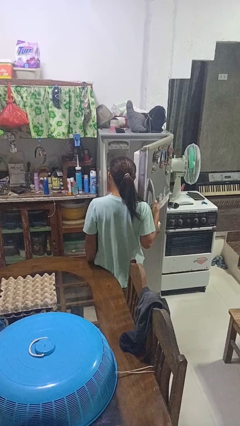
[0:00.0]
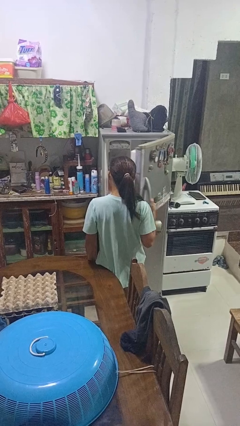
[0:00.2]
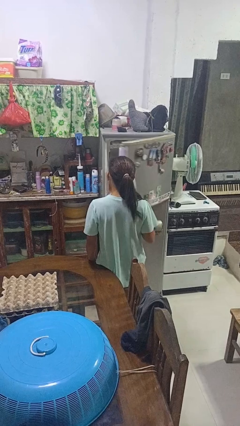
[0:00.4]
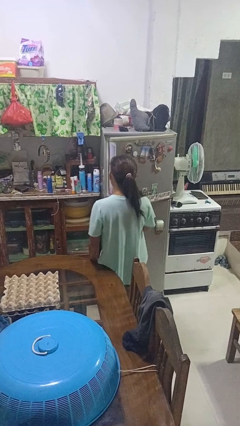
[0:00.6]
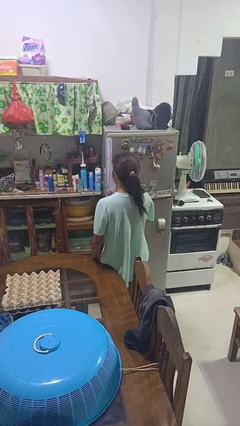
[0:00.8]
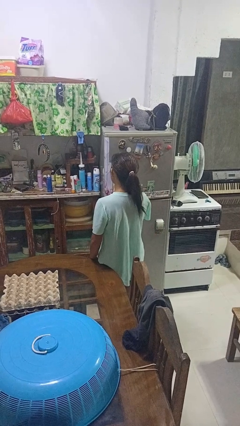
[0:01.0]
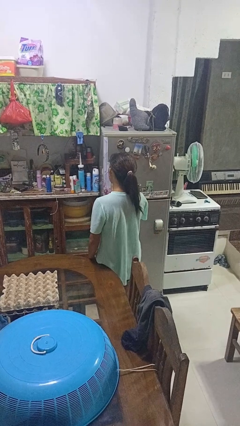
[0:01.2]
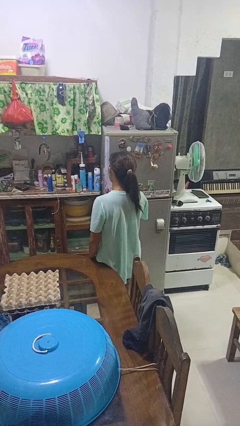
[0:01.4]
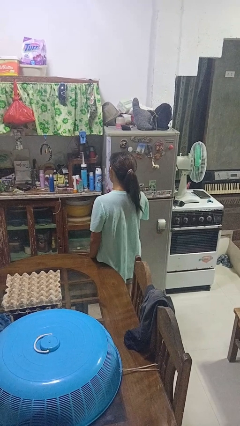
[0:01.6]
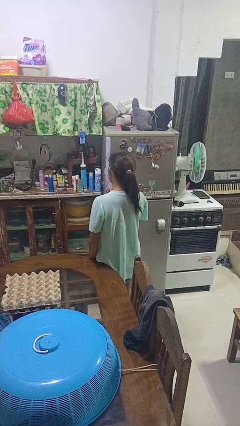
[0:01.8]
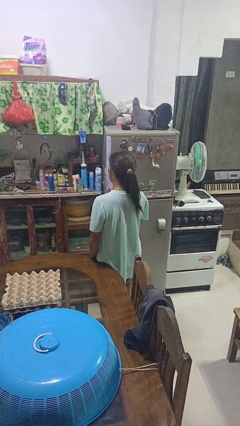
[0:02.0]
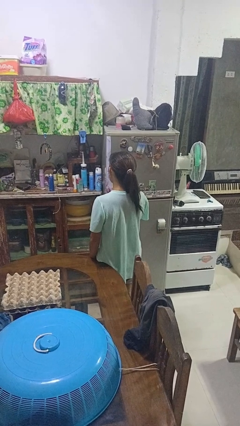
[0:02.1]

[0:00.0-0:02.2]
person closes refrigerator

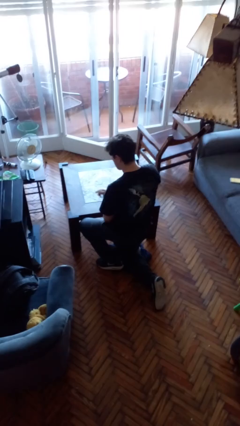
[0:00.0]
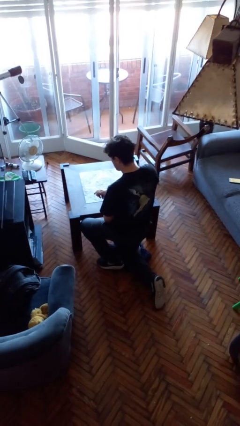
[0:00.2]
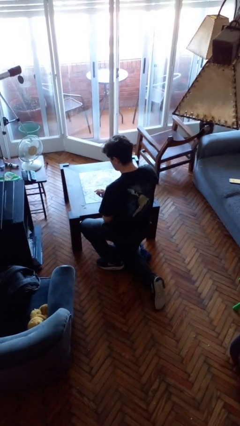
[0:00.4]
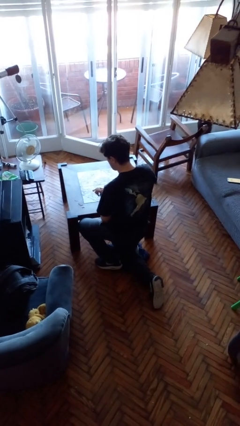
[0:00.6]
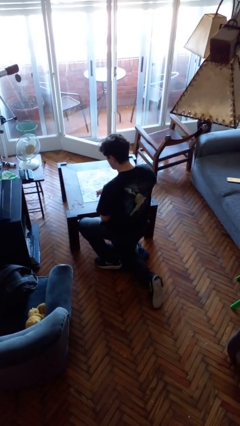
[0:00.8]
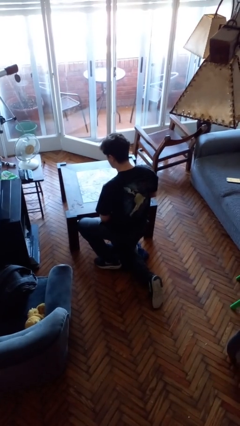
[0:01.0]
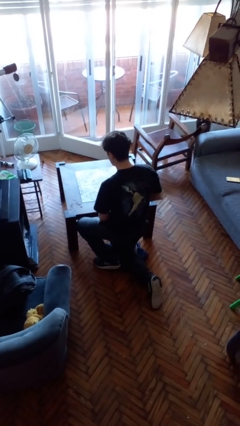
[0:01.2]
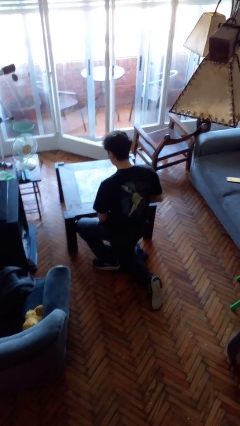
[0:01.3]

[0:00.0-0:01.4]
person sprays from bottle

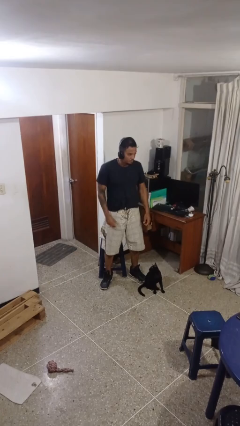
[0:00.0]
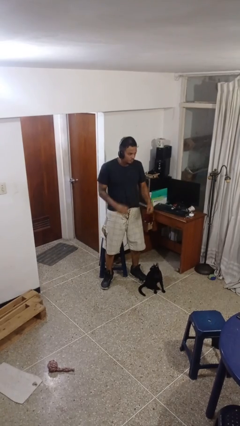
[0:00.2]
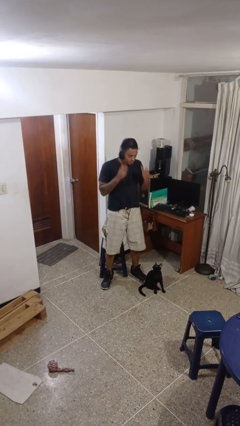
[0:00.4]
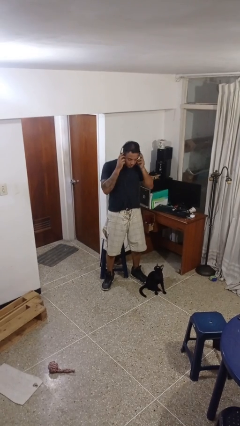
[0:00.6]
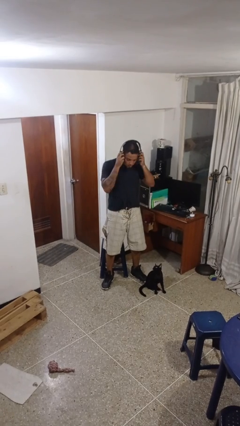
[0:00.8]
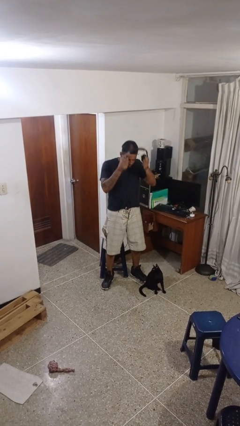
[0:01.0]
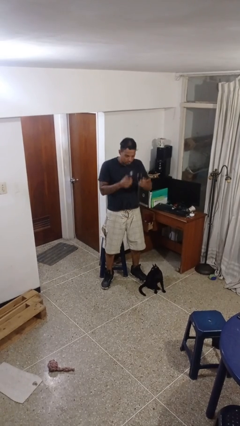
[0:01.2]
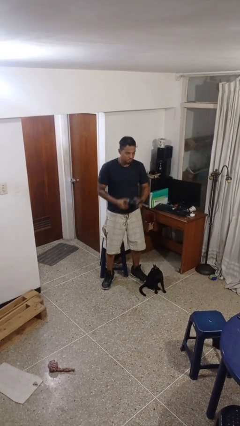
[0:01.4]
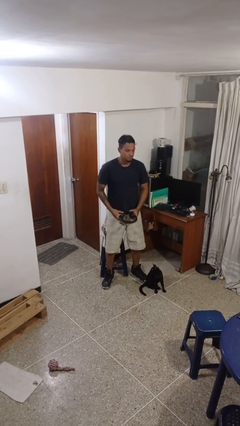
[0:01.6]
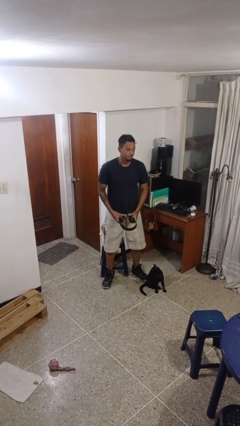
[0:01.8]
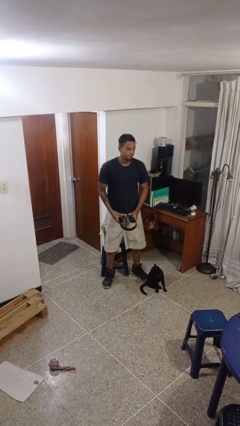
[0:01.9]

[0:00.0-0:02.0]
person takes off headphones

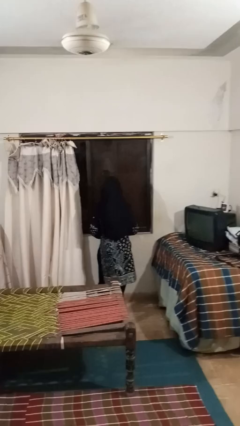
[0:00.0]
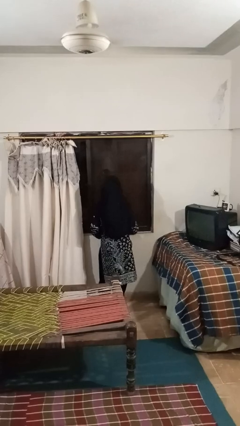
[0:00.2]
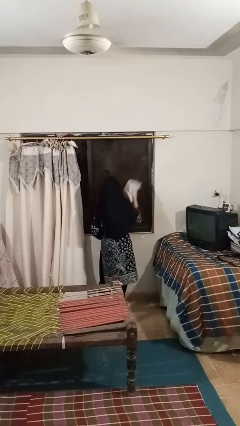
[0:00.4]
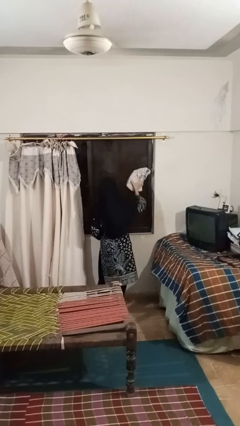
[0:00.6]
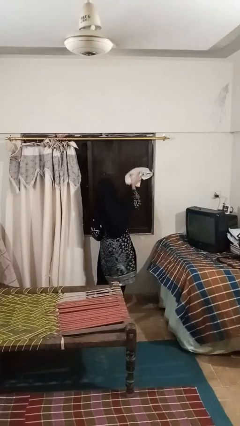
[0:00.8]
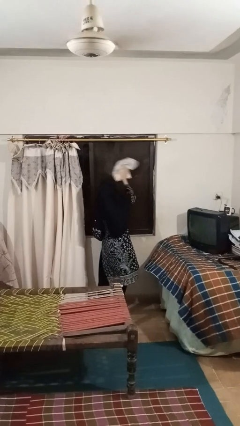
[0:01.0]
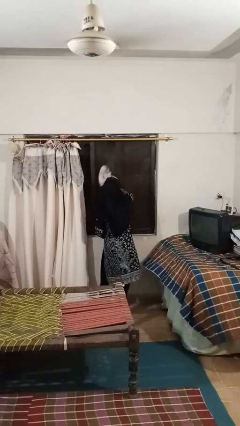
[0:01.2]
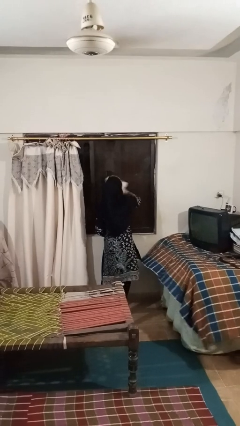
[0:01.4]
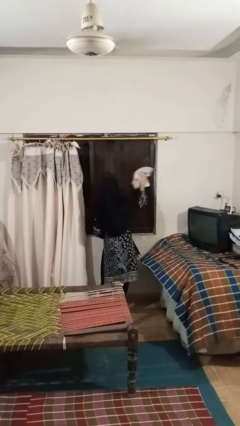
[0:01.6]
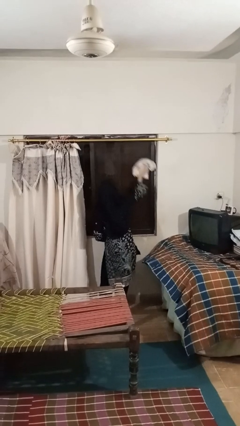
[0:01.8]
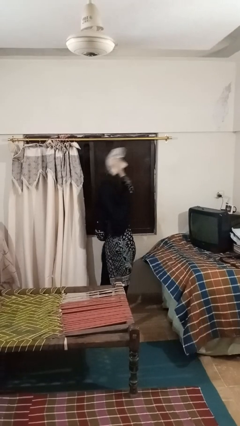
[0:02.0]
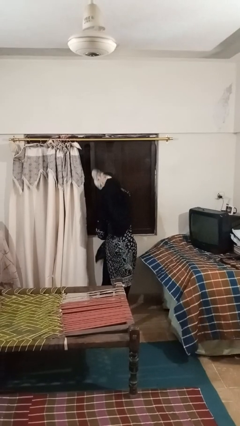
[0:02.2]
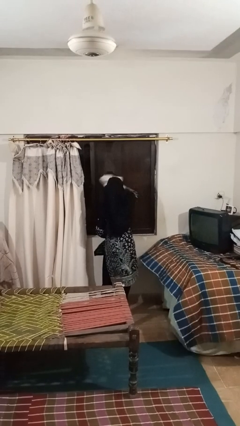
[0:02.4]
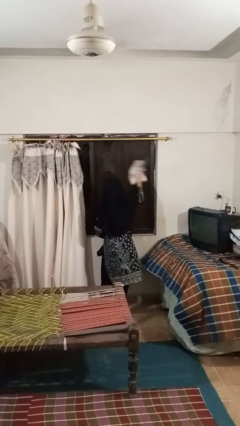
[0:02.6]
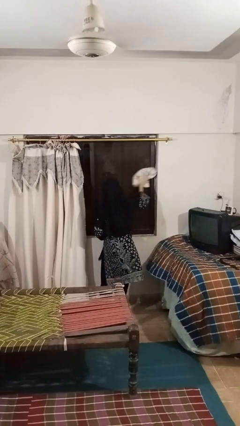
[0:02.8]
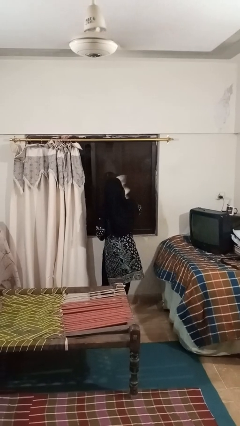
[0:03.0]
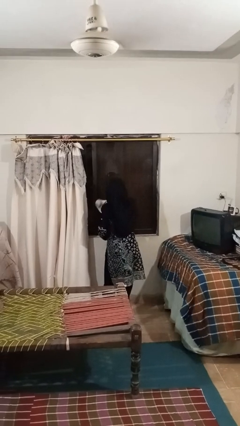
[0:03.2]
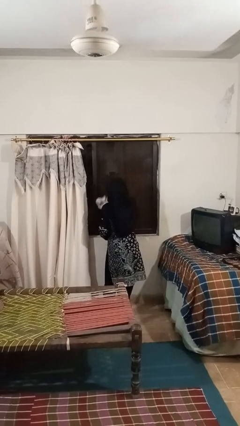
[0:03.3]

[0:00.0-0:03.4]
person washes window

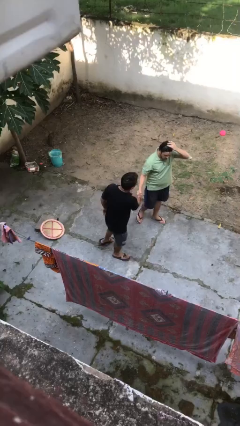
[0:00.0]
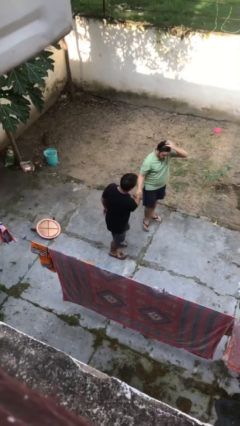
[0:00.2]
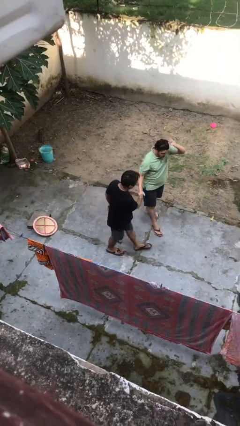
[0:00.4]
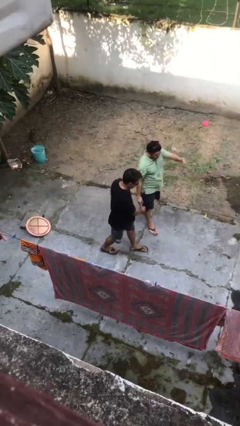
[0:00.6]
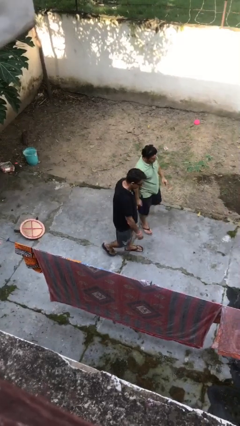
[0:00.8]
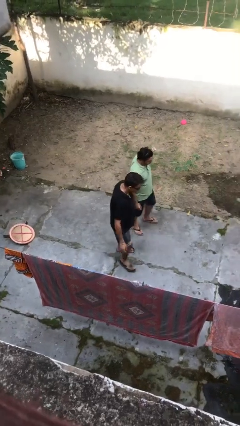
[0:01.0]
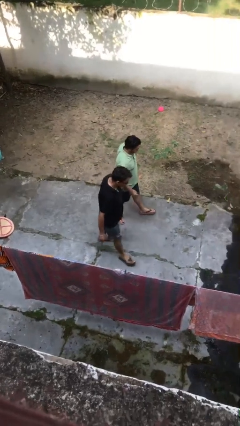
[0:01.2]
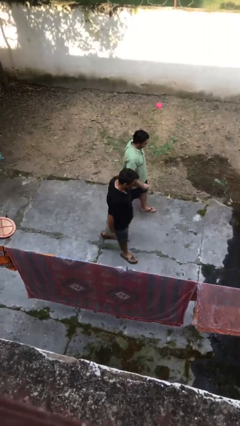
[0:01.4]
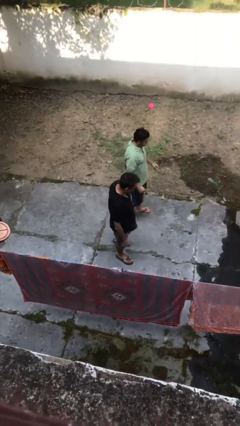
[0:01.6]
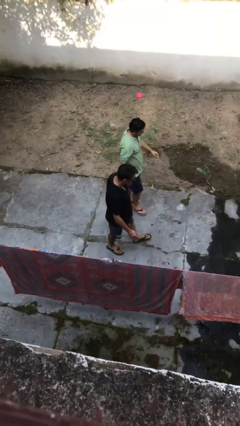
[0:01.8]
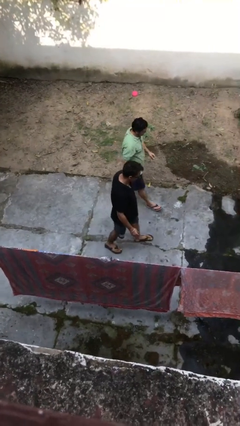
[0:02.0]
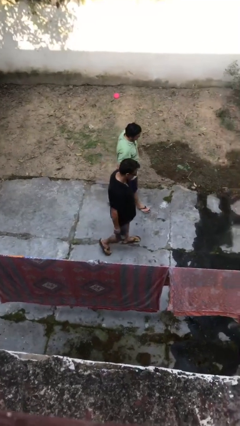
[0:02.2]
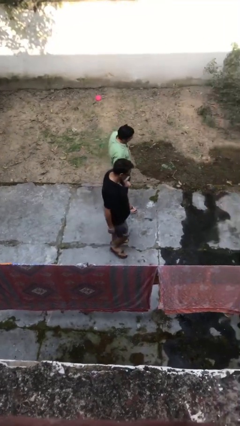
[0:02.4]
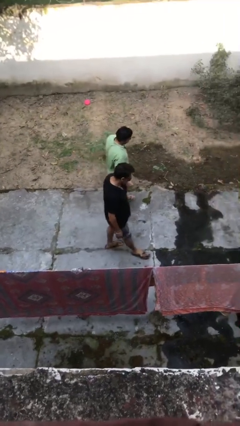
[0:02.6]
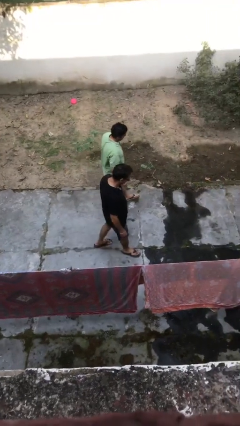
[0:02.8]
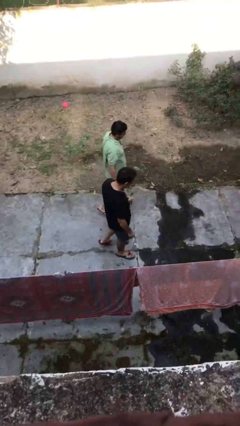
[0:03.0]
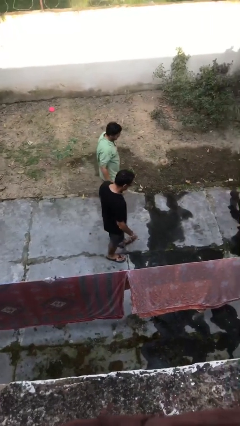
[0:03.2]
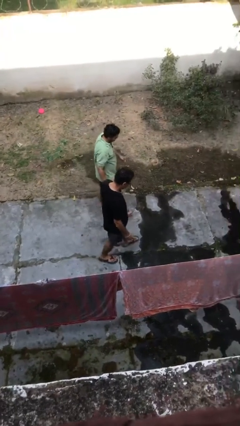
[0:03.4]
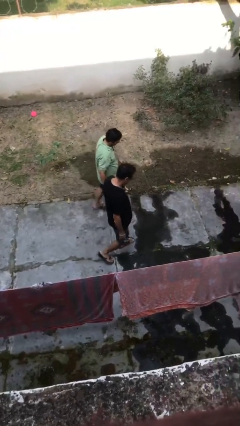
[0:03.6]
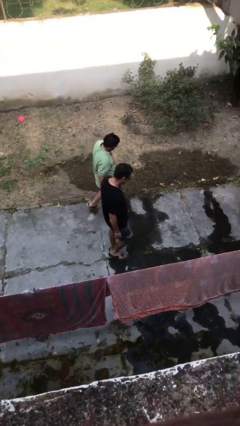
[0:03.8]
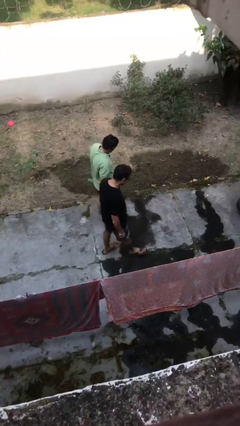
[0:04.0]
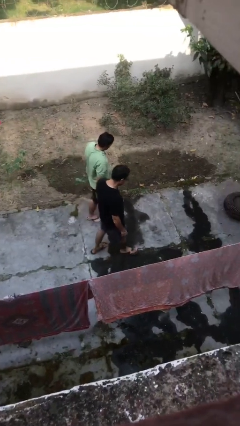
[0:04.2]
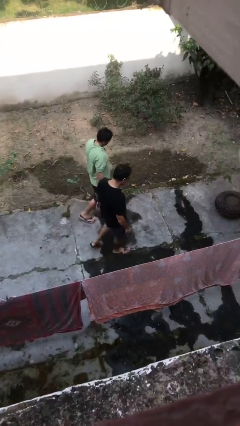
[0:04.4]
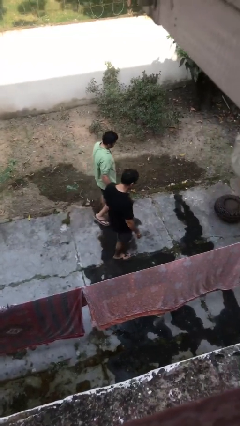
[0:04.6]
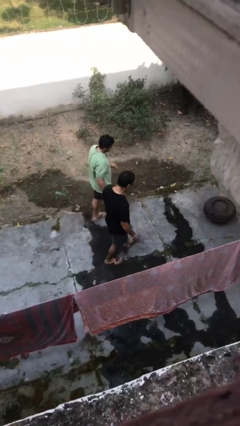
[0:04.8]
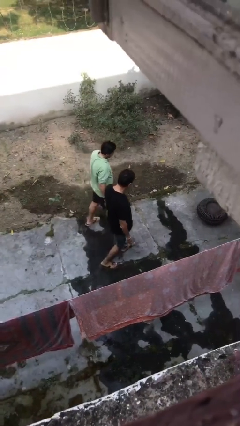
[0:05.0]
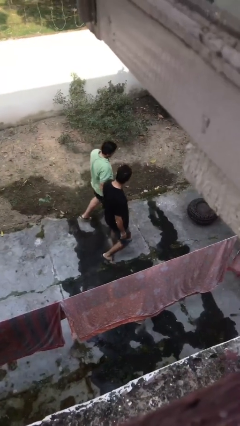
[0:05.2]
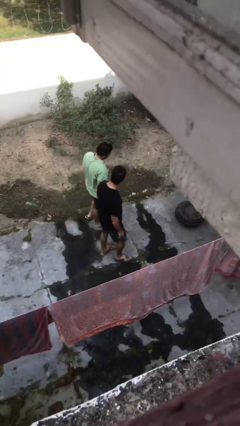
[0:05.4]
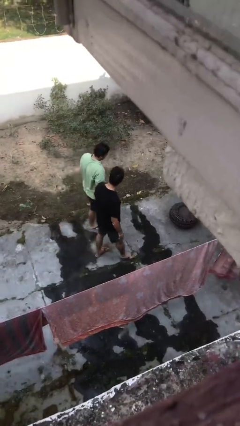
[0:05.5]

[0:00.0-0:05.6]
person talks to person

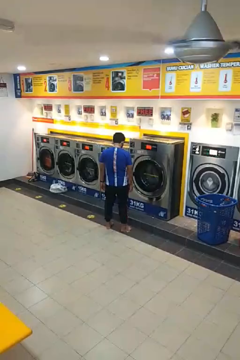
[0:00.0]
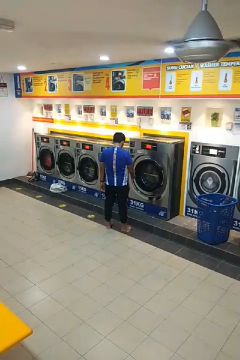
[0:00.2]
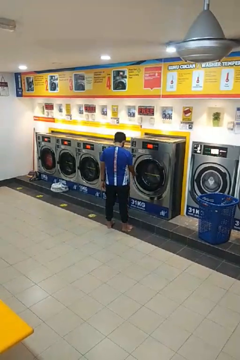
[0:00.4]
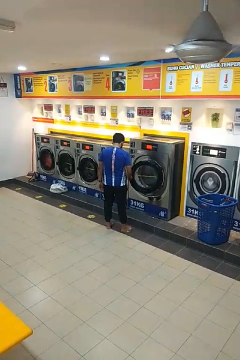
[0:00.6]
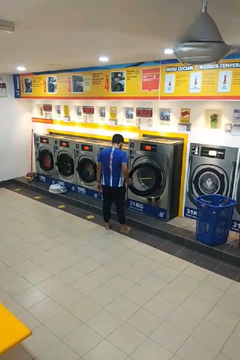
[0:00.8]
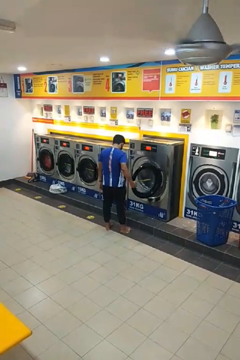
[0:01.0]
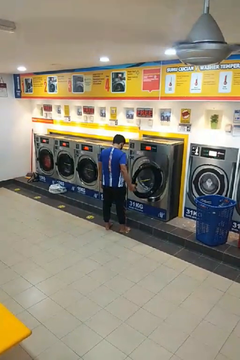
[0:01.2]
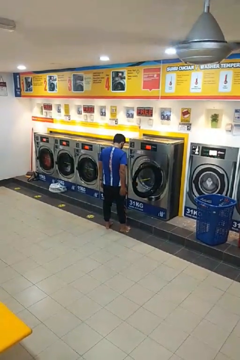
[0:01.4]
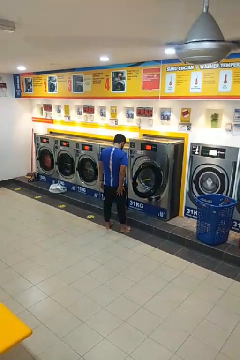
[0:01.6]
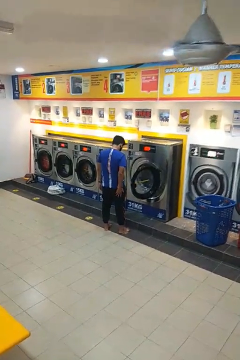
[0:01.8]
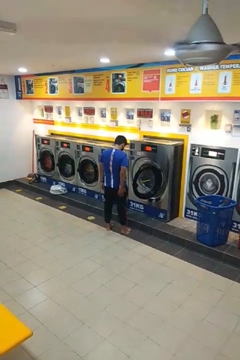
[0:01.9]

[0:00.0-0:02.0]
person opens clothes washer

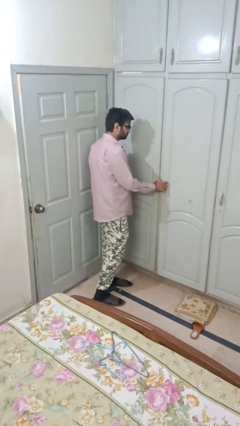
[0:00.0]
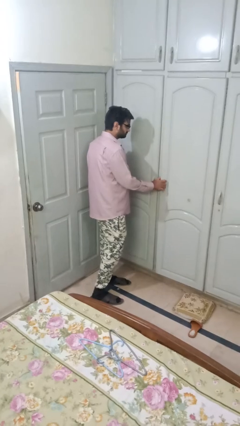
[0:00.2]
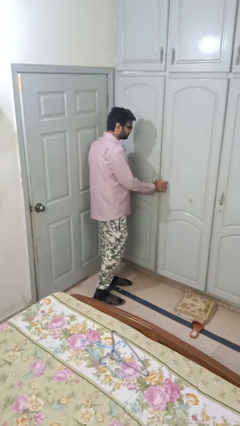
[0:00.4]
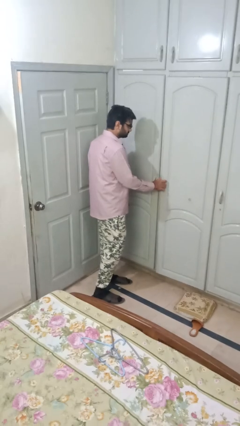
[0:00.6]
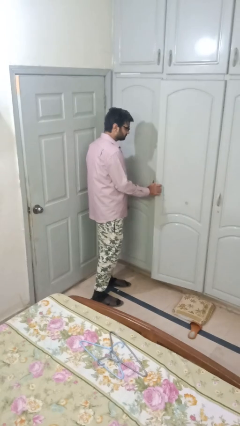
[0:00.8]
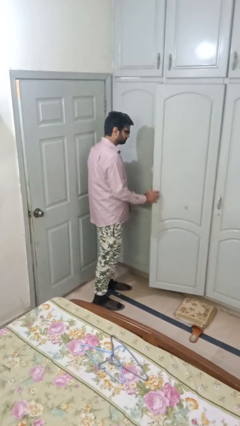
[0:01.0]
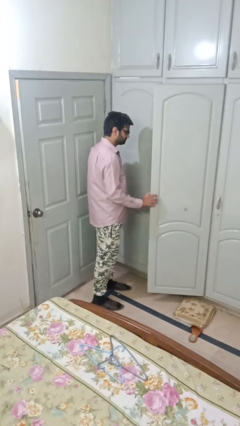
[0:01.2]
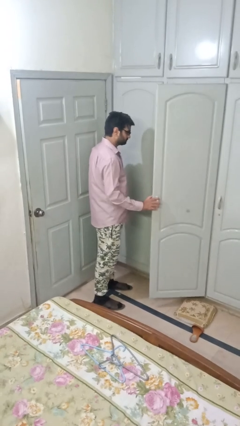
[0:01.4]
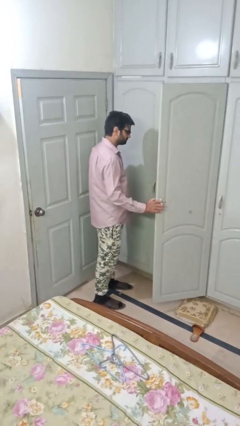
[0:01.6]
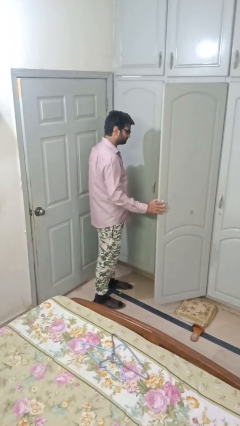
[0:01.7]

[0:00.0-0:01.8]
person opens closet door
